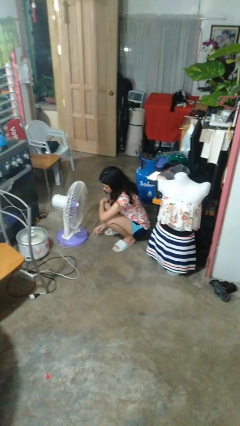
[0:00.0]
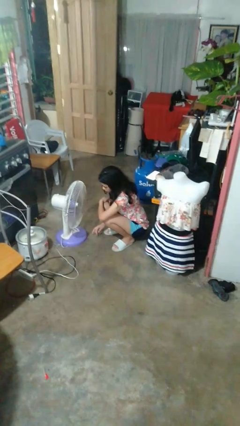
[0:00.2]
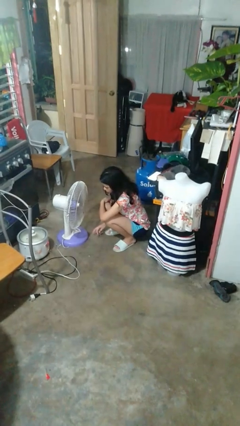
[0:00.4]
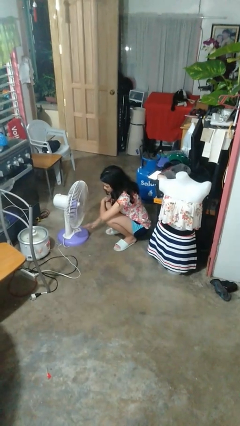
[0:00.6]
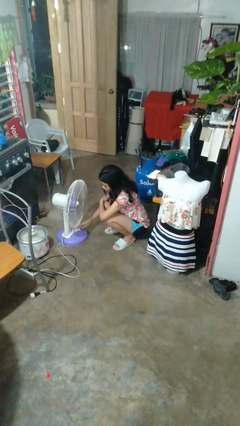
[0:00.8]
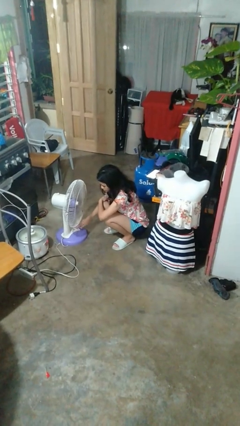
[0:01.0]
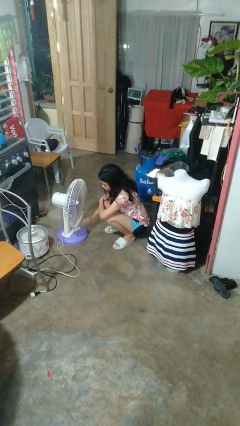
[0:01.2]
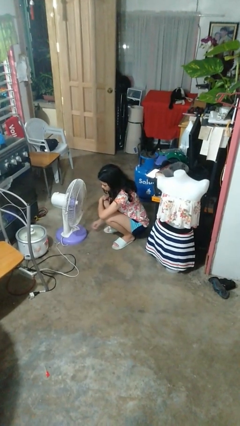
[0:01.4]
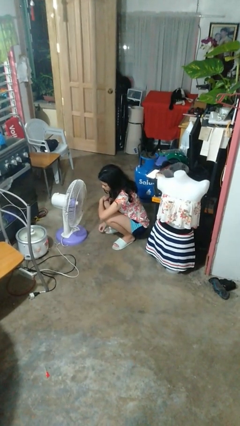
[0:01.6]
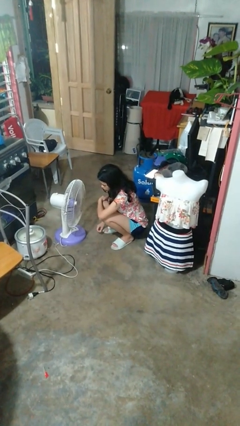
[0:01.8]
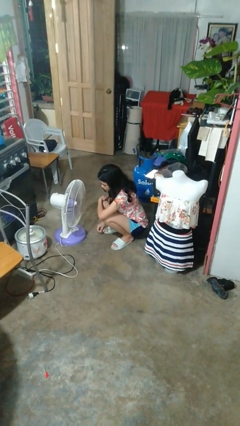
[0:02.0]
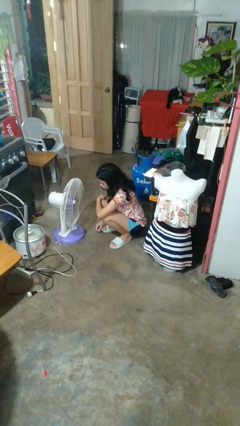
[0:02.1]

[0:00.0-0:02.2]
person turns on fan

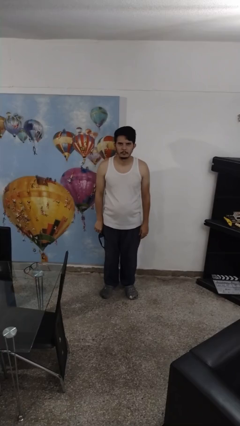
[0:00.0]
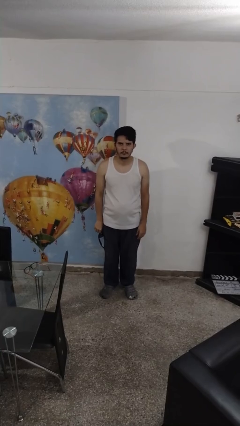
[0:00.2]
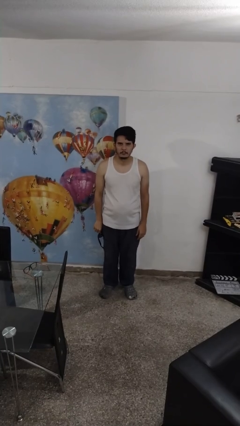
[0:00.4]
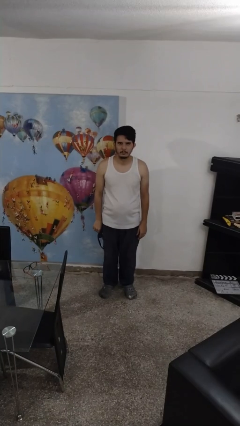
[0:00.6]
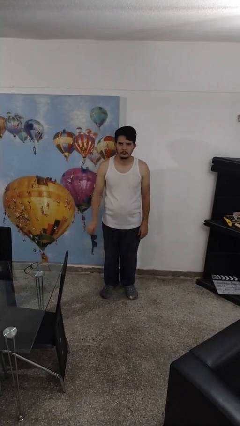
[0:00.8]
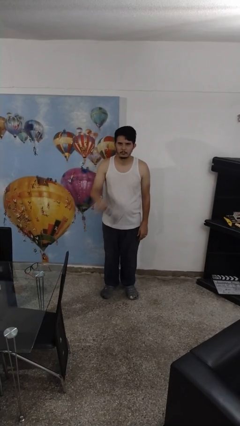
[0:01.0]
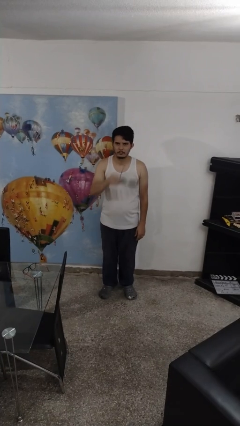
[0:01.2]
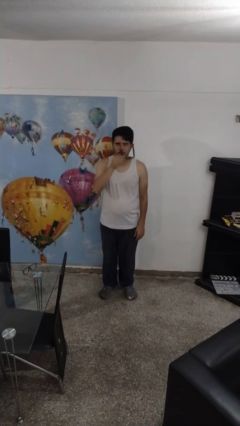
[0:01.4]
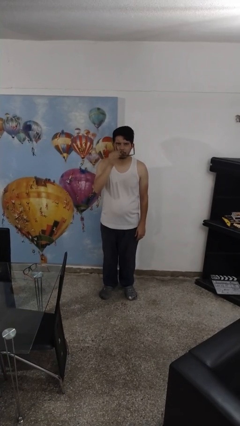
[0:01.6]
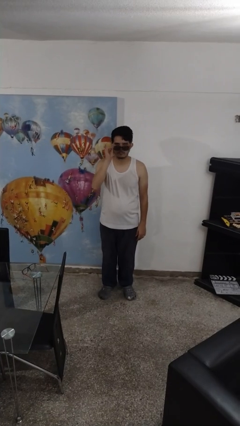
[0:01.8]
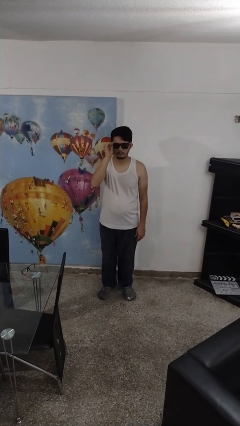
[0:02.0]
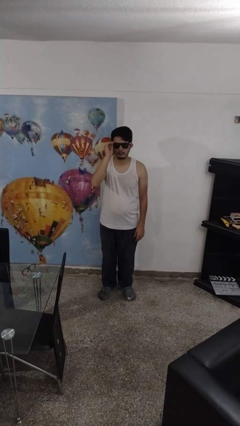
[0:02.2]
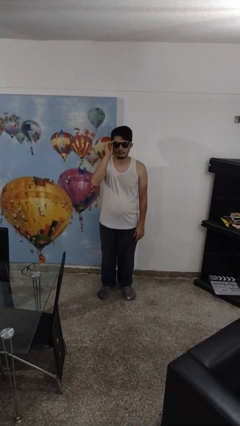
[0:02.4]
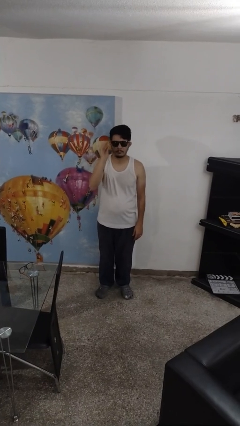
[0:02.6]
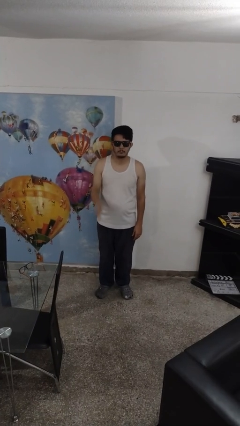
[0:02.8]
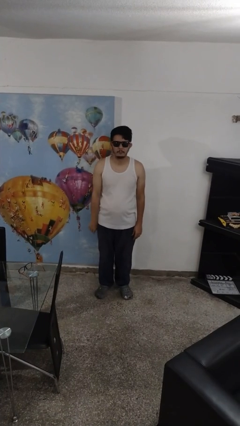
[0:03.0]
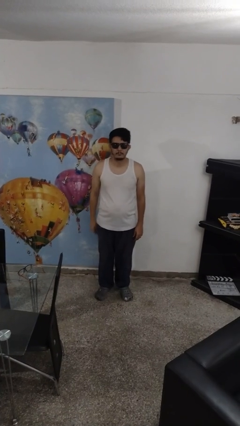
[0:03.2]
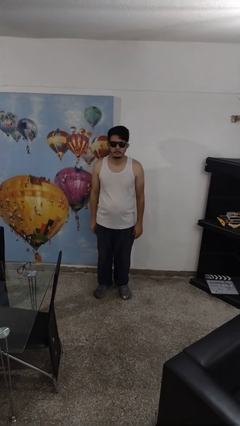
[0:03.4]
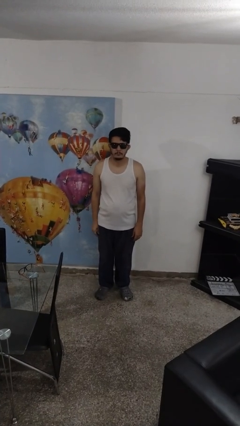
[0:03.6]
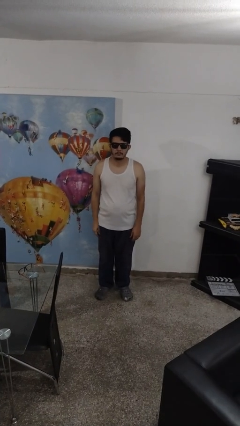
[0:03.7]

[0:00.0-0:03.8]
person puts on sunglasses

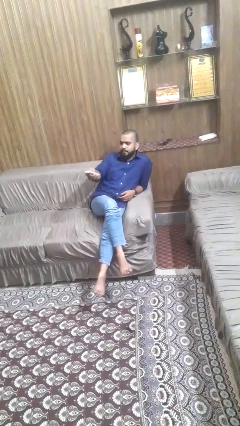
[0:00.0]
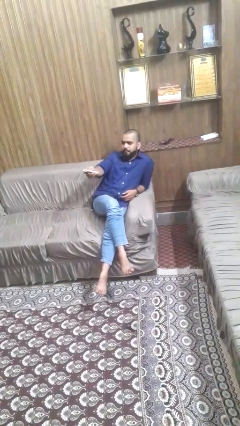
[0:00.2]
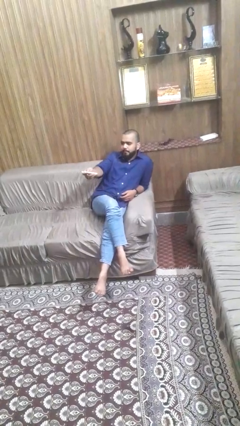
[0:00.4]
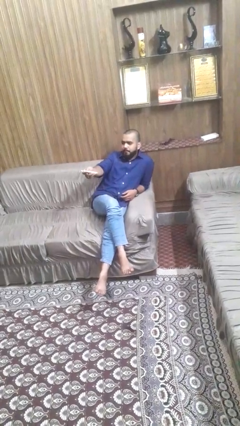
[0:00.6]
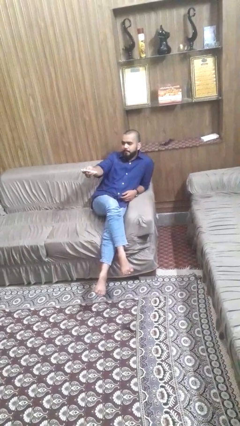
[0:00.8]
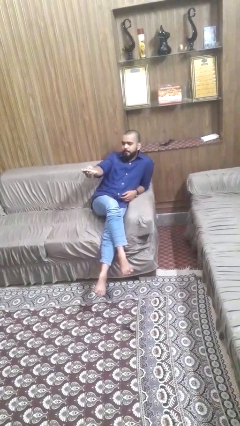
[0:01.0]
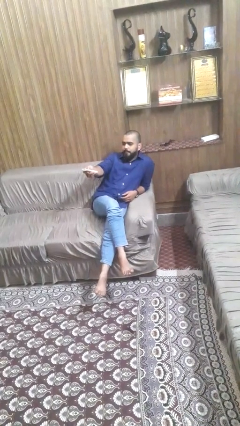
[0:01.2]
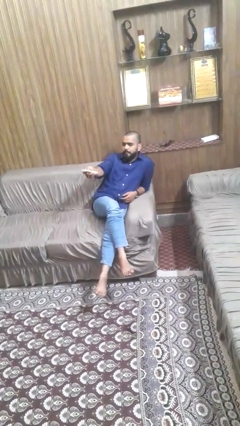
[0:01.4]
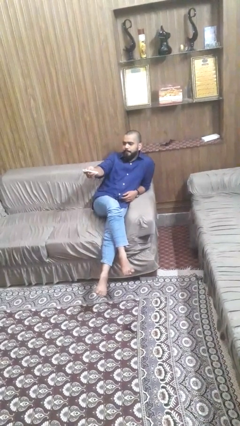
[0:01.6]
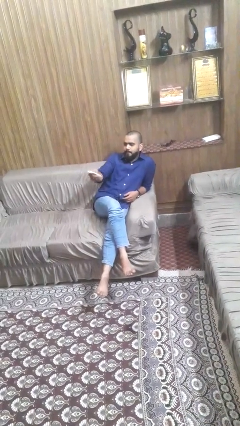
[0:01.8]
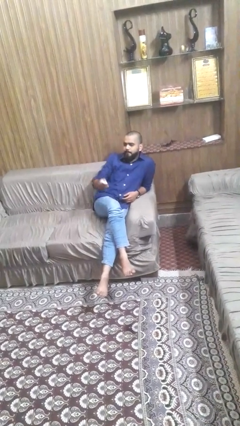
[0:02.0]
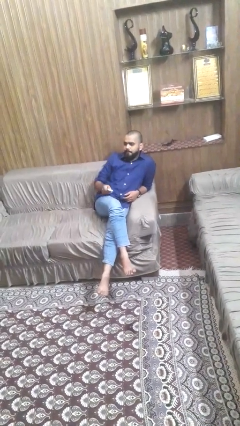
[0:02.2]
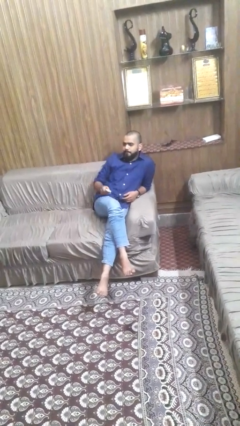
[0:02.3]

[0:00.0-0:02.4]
person uses television remote

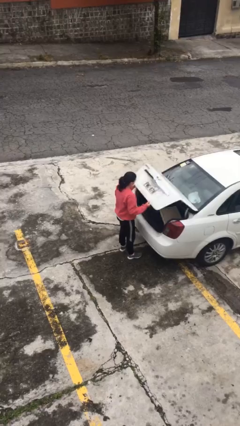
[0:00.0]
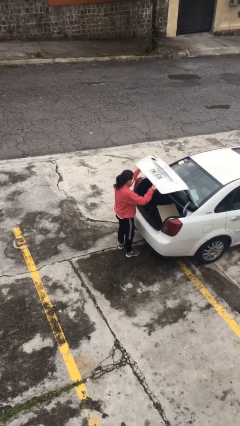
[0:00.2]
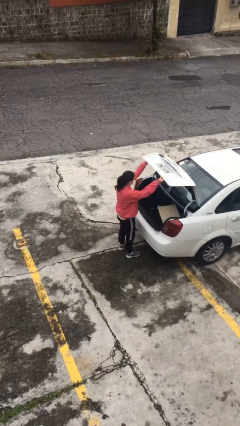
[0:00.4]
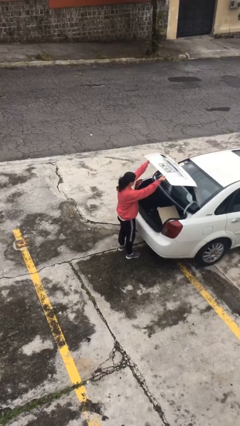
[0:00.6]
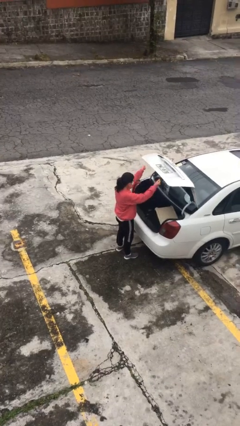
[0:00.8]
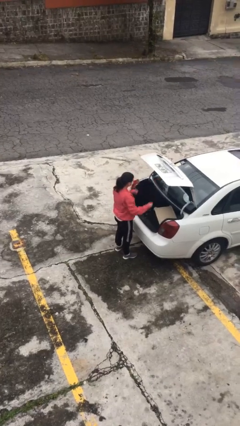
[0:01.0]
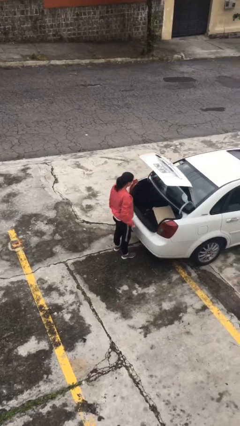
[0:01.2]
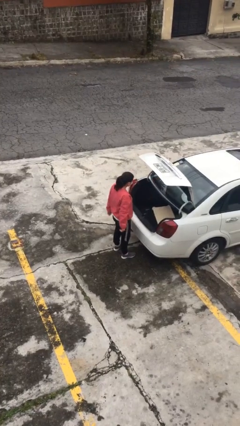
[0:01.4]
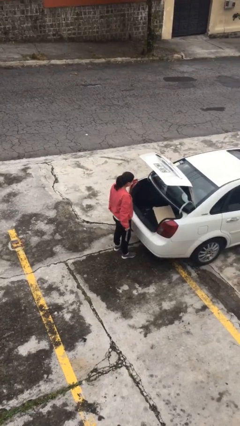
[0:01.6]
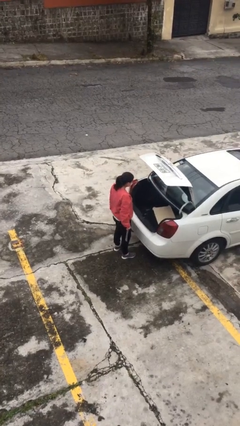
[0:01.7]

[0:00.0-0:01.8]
person opens car trunk

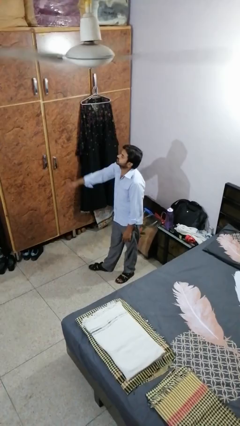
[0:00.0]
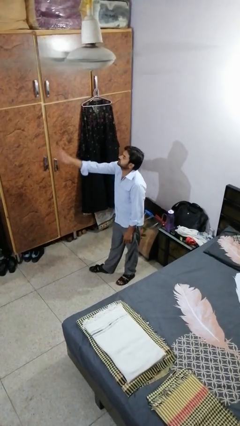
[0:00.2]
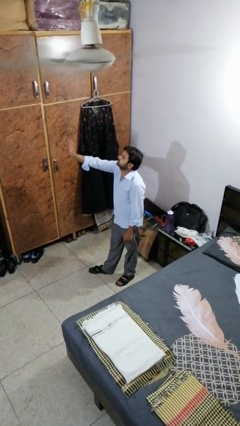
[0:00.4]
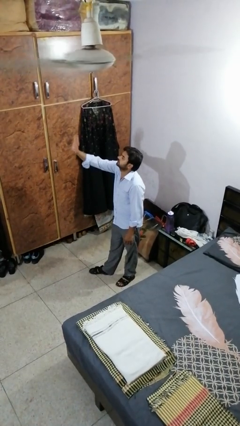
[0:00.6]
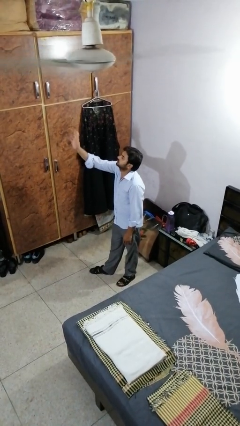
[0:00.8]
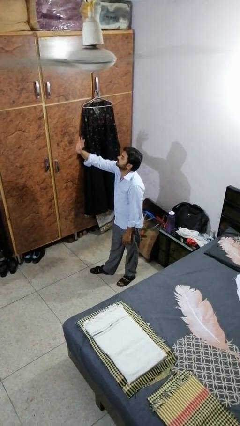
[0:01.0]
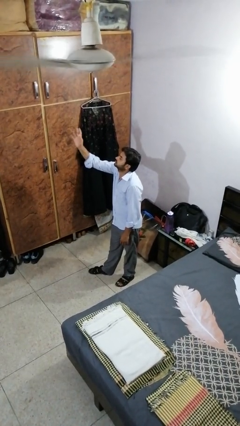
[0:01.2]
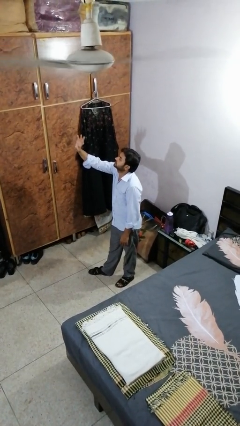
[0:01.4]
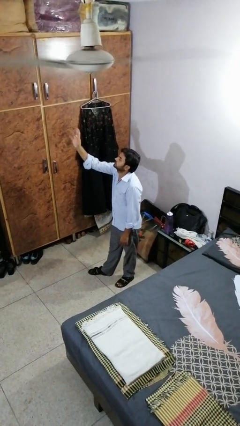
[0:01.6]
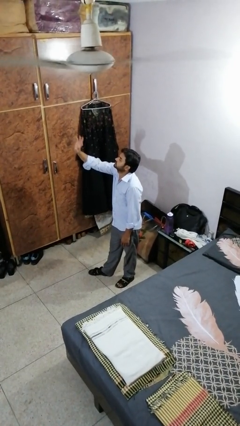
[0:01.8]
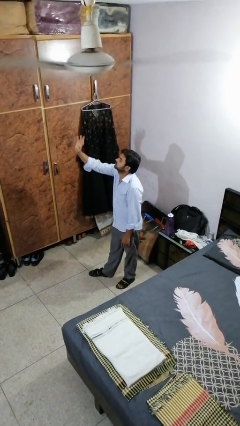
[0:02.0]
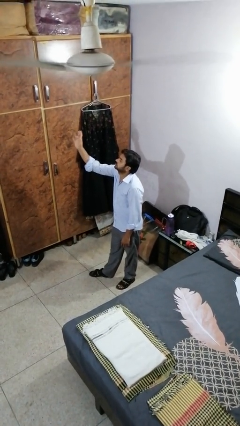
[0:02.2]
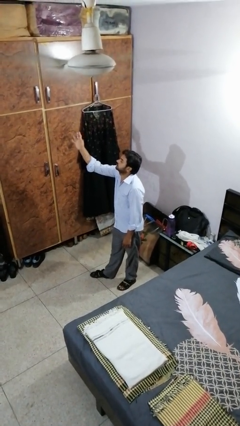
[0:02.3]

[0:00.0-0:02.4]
person waves at person

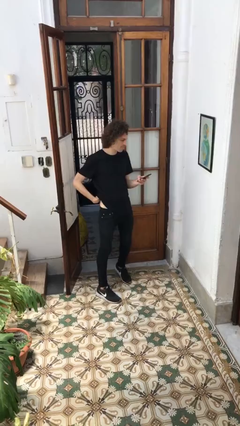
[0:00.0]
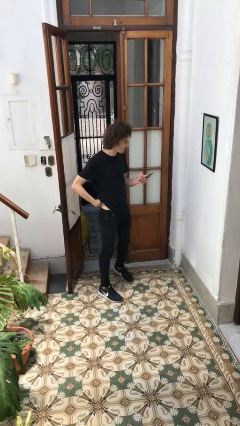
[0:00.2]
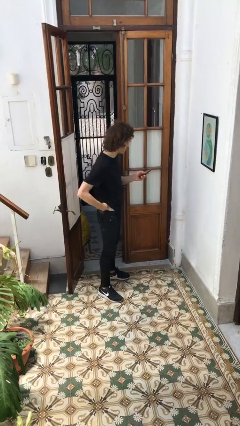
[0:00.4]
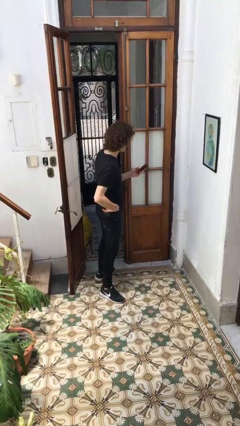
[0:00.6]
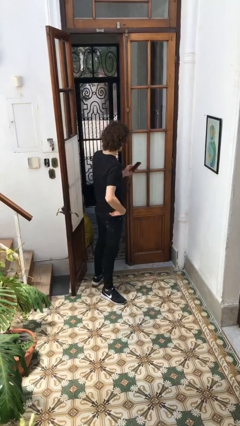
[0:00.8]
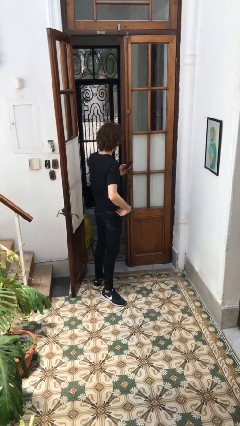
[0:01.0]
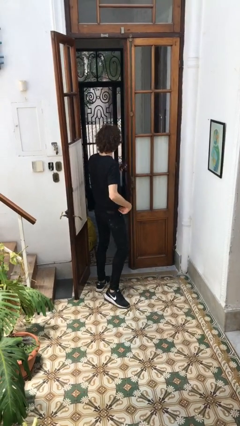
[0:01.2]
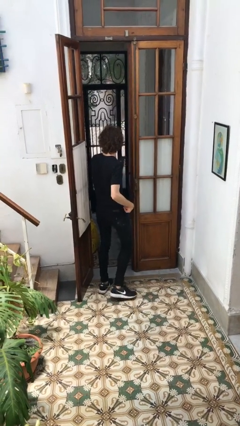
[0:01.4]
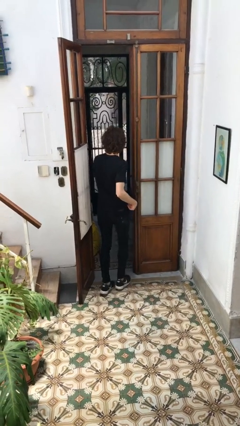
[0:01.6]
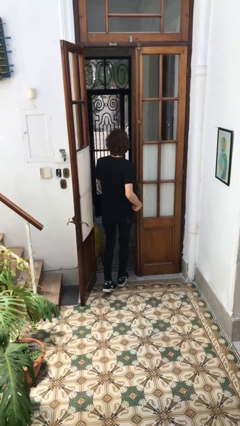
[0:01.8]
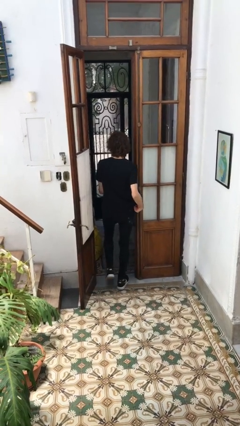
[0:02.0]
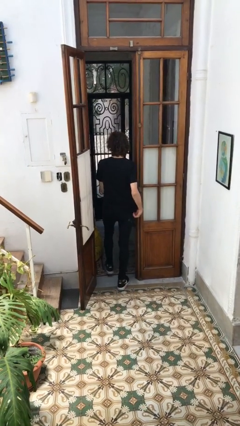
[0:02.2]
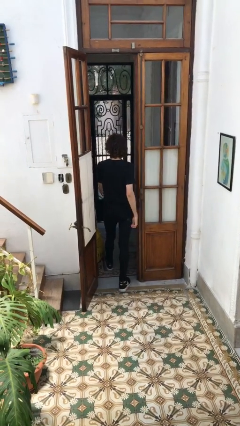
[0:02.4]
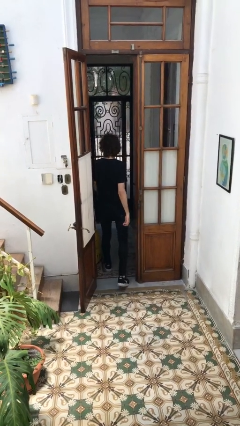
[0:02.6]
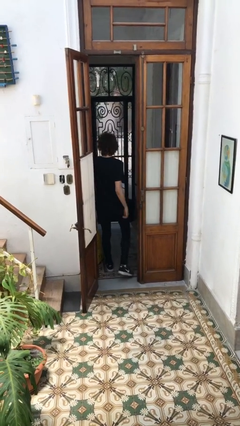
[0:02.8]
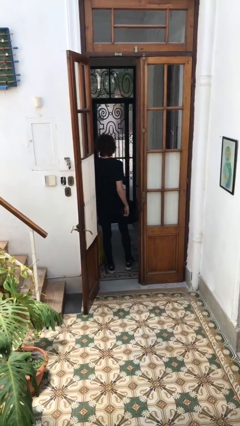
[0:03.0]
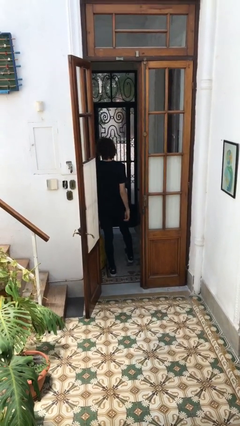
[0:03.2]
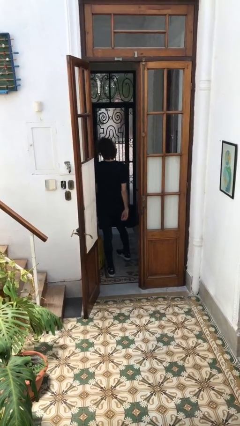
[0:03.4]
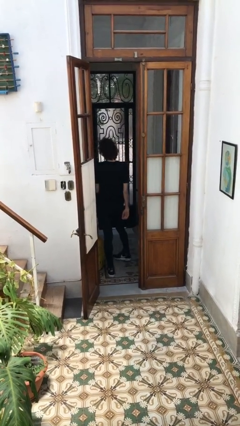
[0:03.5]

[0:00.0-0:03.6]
person exits scene through structure

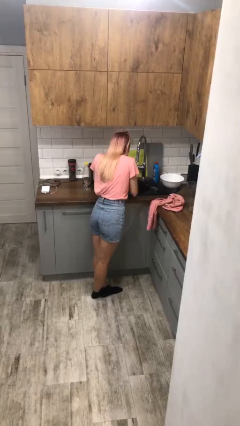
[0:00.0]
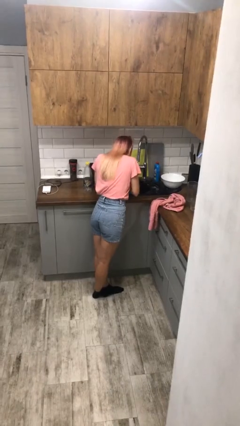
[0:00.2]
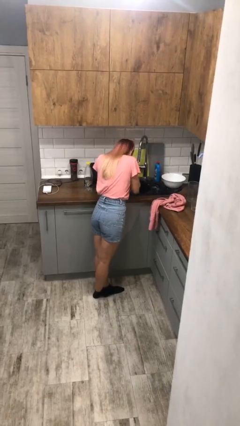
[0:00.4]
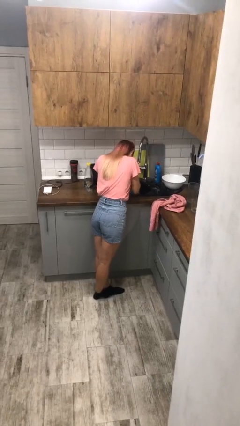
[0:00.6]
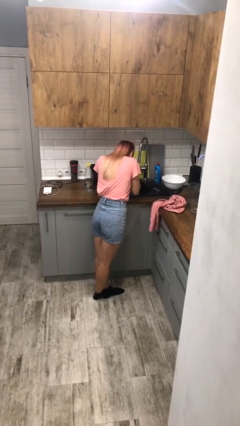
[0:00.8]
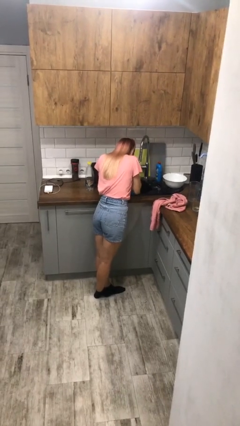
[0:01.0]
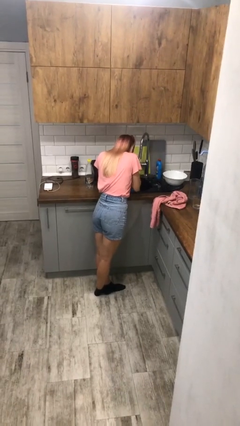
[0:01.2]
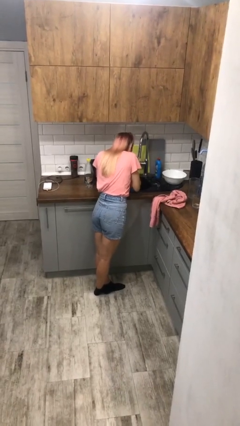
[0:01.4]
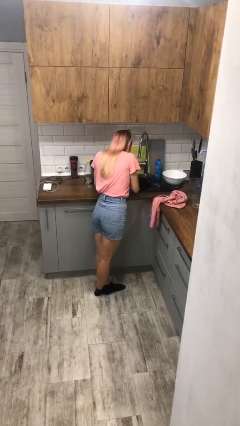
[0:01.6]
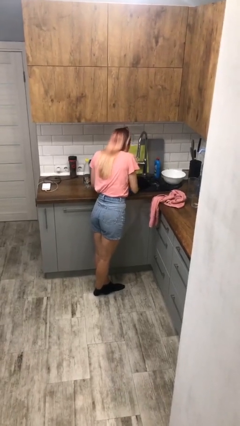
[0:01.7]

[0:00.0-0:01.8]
person washes face
